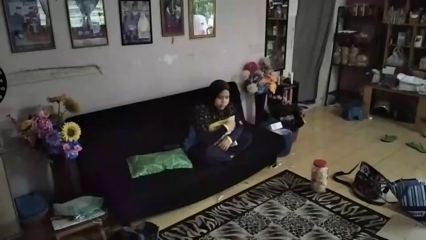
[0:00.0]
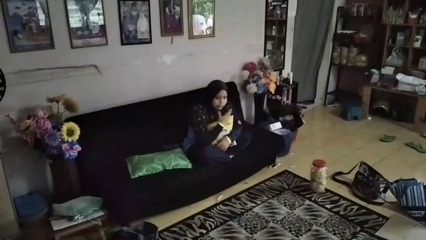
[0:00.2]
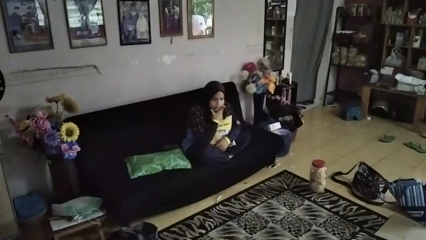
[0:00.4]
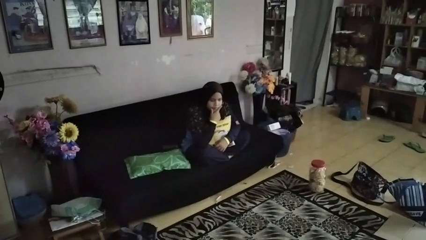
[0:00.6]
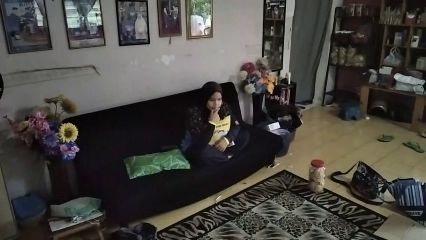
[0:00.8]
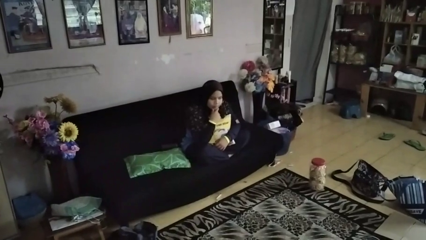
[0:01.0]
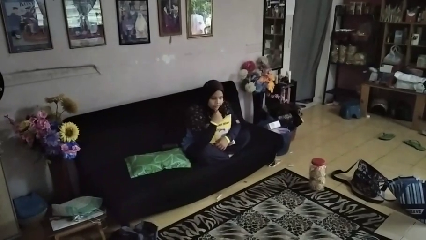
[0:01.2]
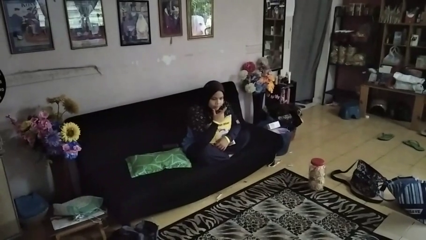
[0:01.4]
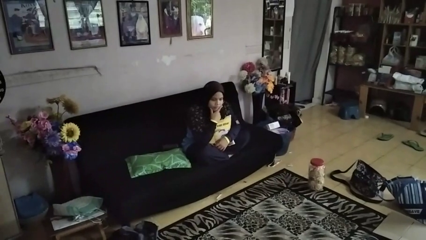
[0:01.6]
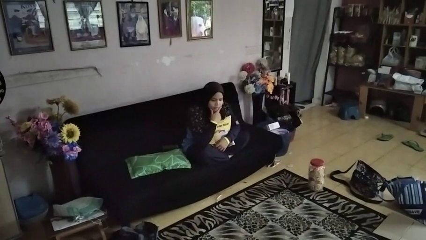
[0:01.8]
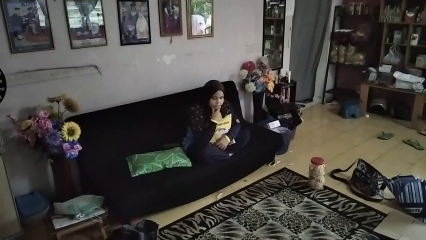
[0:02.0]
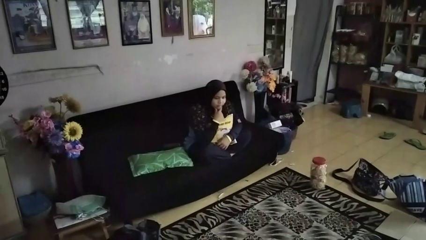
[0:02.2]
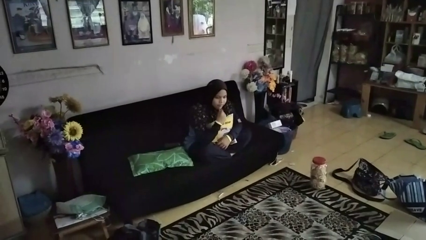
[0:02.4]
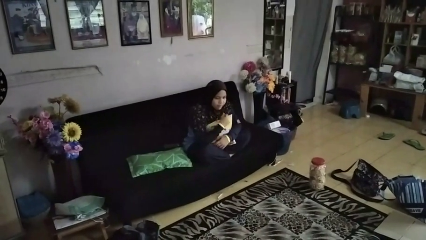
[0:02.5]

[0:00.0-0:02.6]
person strokes chin

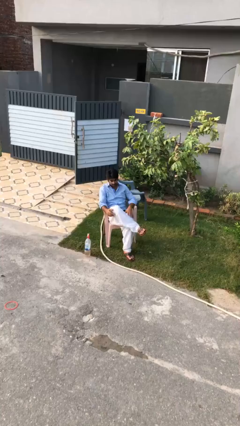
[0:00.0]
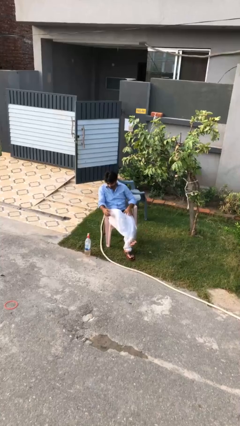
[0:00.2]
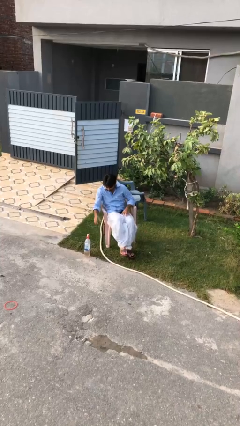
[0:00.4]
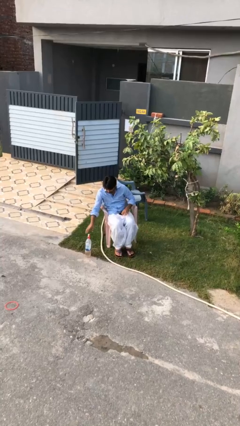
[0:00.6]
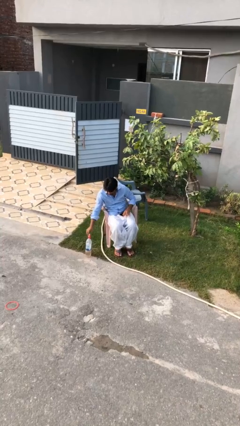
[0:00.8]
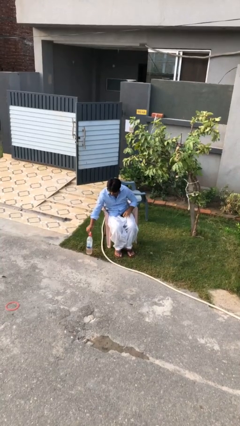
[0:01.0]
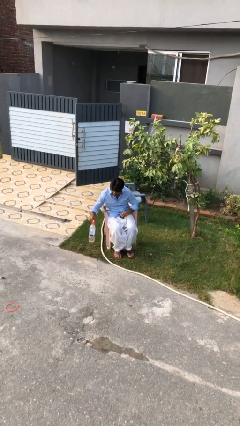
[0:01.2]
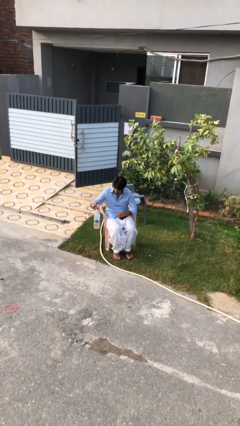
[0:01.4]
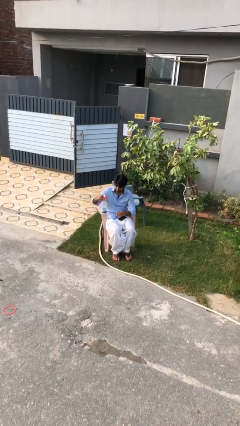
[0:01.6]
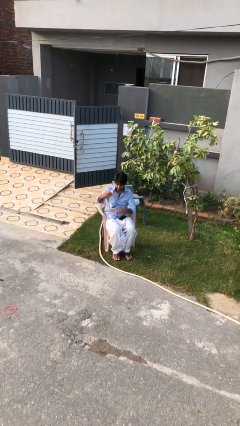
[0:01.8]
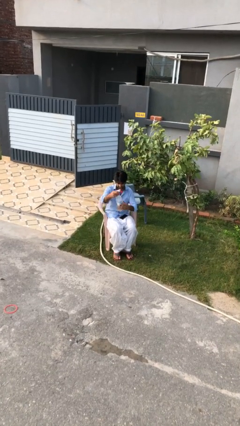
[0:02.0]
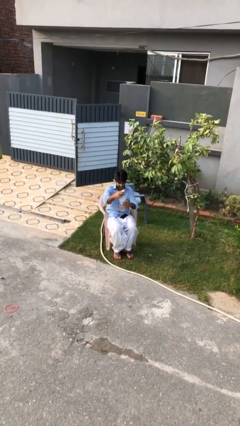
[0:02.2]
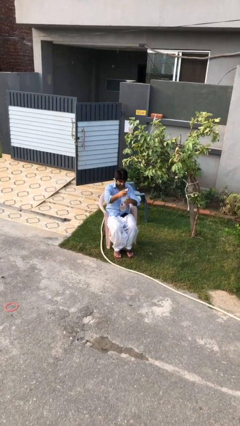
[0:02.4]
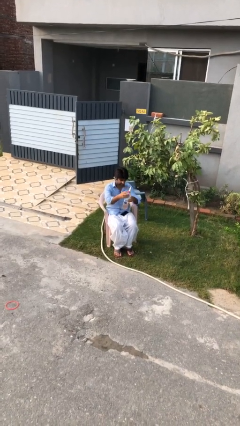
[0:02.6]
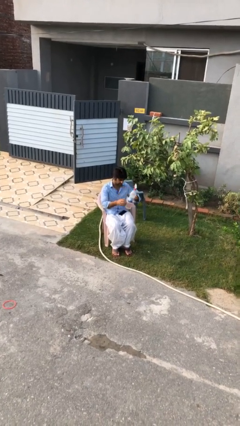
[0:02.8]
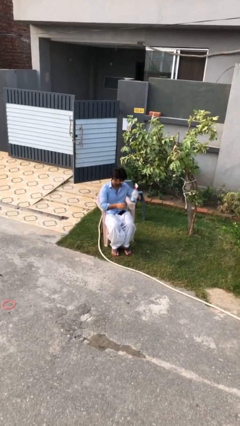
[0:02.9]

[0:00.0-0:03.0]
person picks up object from floor

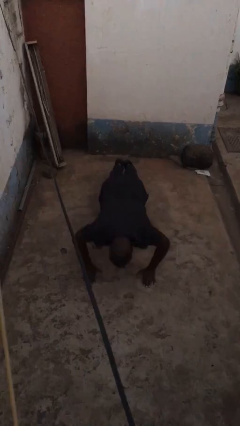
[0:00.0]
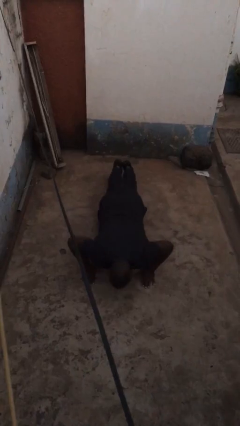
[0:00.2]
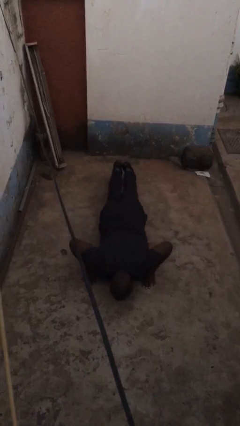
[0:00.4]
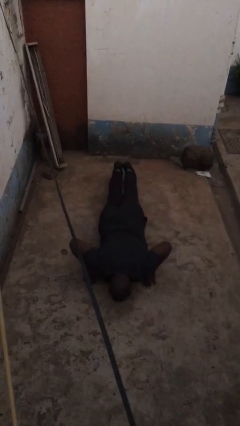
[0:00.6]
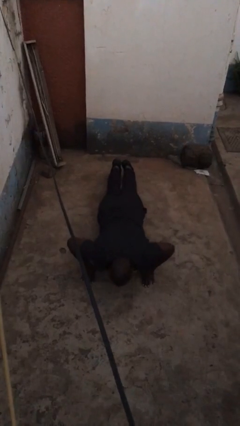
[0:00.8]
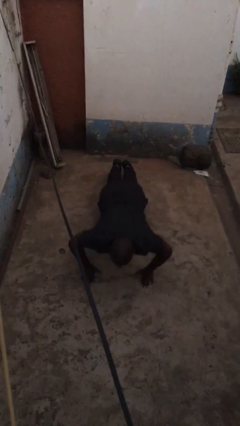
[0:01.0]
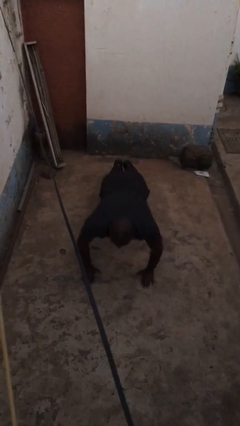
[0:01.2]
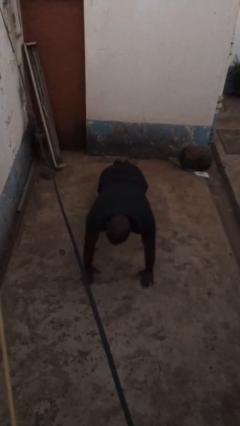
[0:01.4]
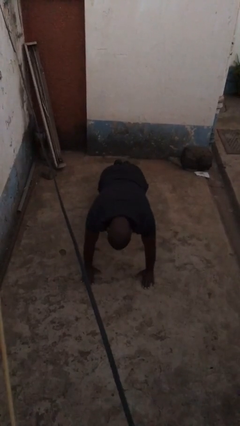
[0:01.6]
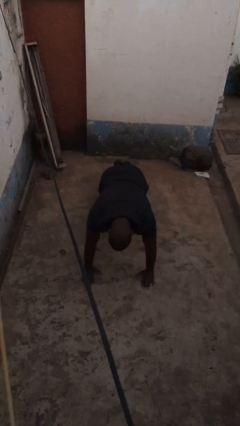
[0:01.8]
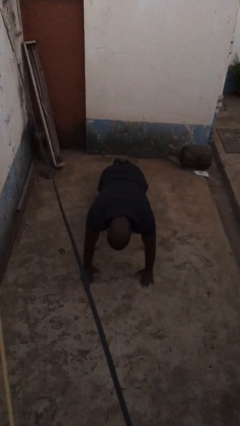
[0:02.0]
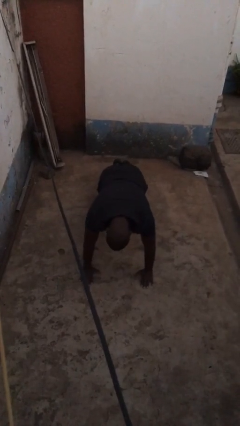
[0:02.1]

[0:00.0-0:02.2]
person exercises with pushup

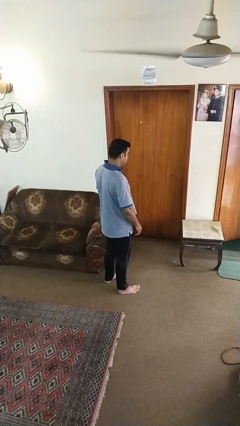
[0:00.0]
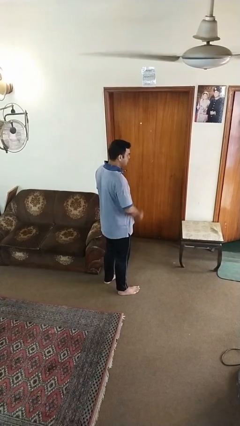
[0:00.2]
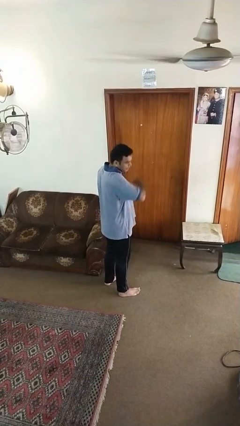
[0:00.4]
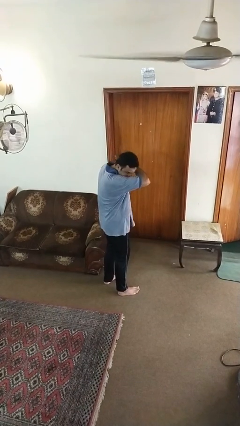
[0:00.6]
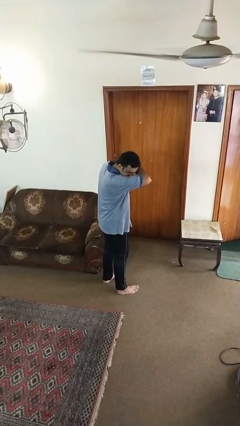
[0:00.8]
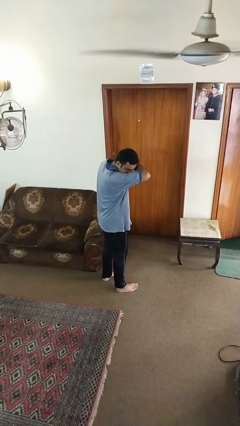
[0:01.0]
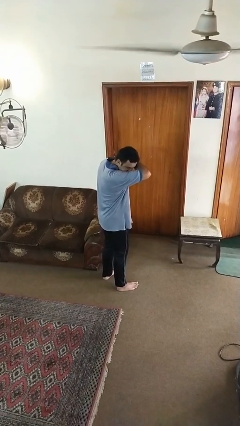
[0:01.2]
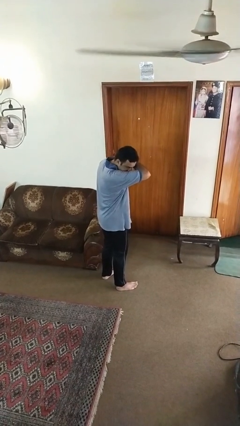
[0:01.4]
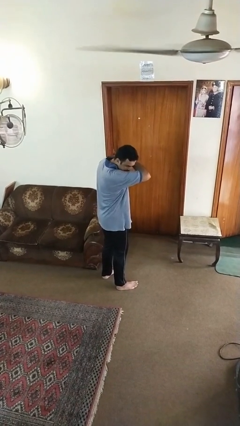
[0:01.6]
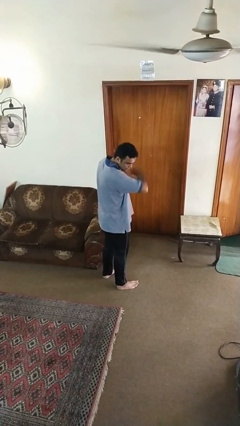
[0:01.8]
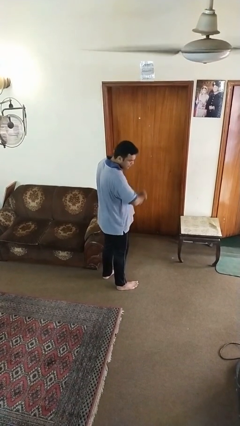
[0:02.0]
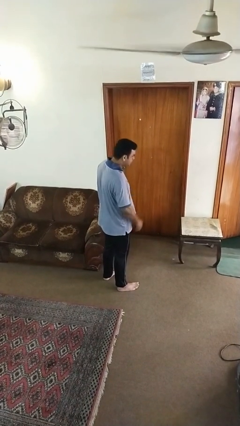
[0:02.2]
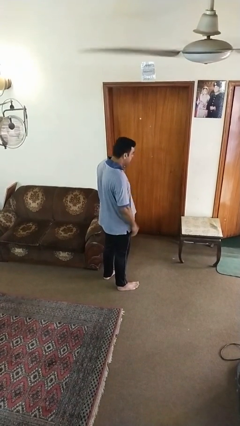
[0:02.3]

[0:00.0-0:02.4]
person sneezes into arm

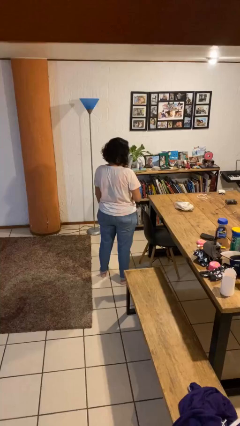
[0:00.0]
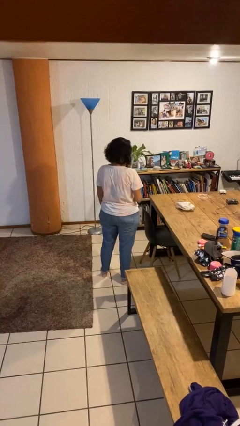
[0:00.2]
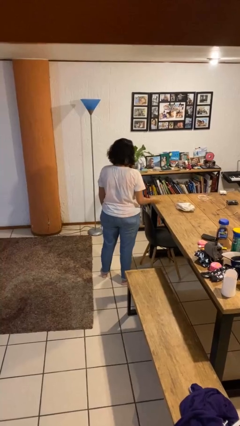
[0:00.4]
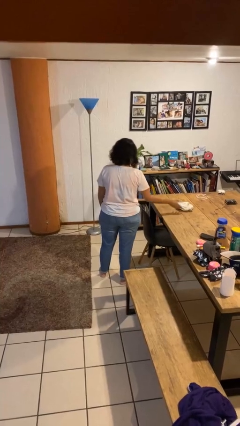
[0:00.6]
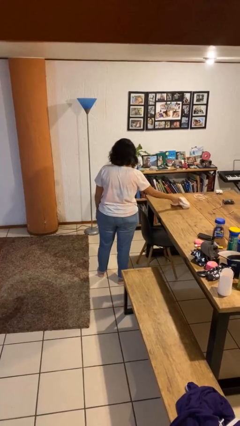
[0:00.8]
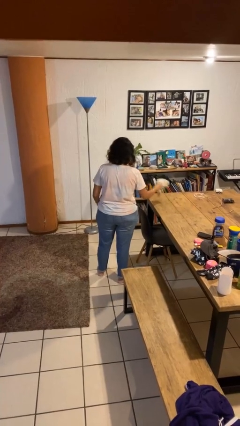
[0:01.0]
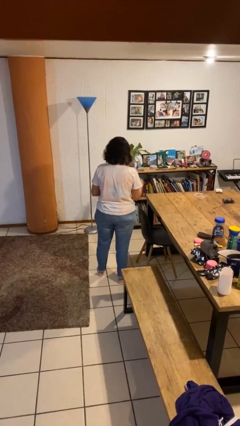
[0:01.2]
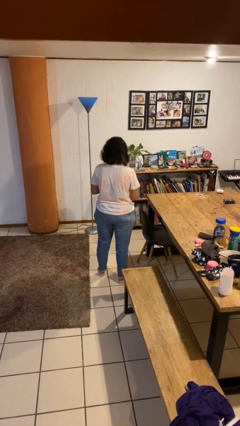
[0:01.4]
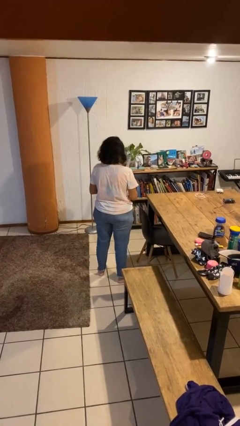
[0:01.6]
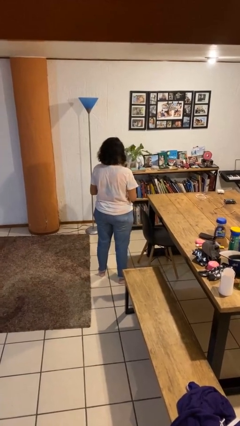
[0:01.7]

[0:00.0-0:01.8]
person picks up object from table

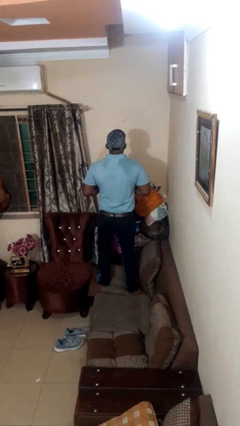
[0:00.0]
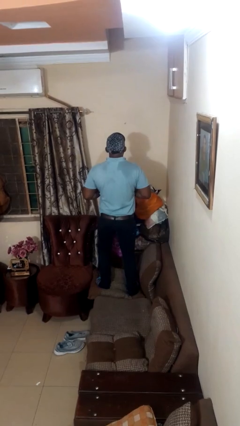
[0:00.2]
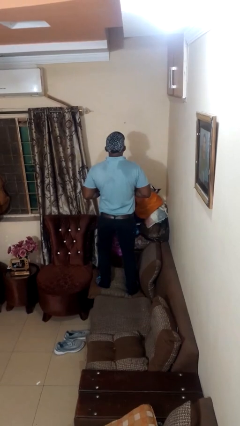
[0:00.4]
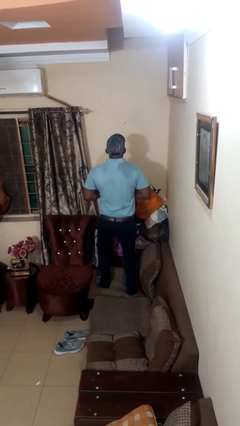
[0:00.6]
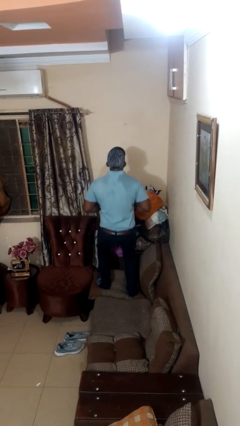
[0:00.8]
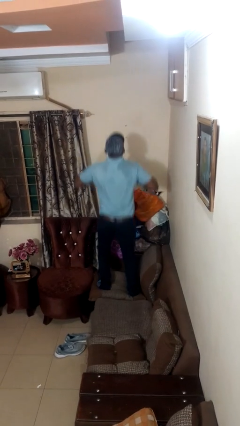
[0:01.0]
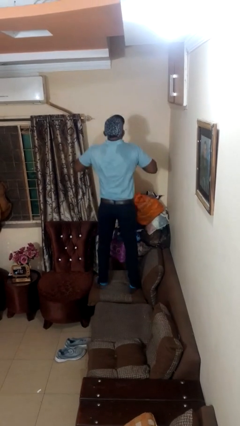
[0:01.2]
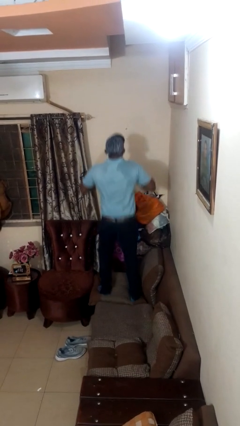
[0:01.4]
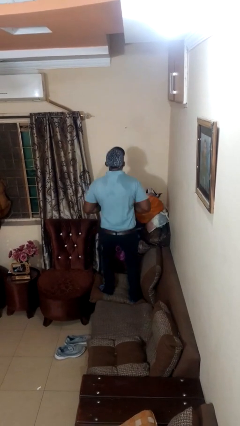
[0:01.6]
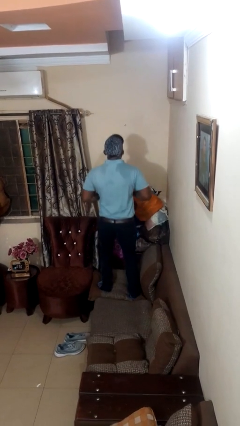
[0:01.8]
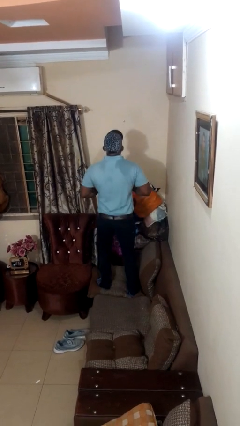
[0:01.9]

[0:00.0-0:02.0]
person jumps on couch

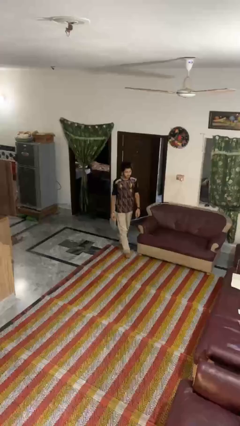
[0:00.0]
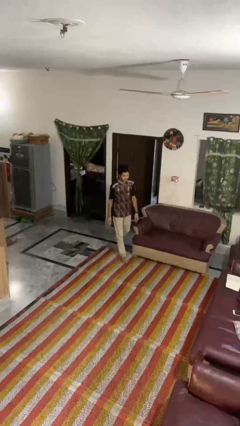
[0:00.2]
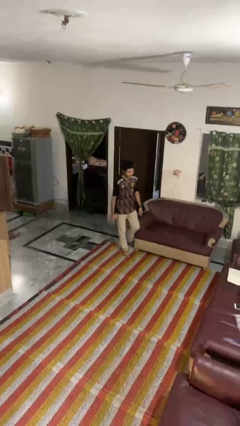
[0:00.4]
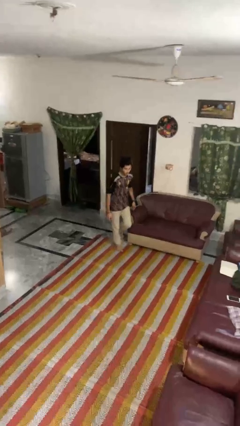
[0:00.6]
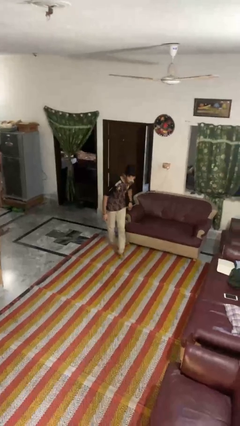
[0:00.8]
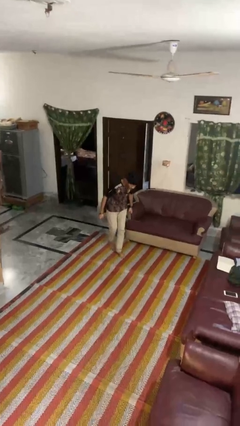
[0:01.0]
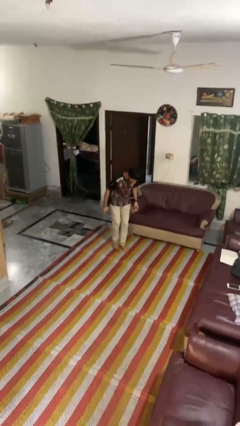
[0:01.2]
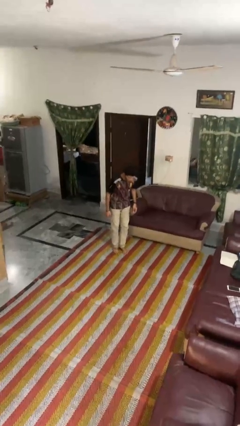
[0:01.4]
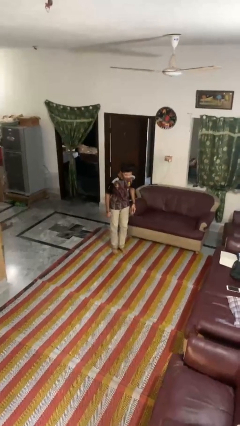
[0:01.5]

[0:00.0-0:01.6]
person stubs toe

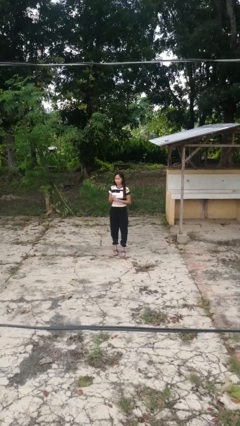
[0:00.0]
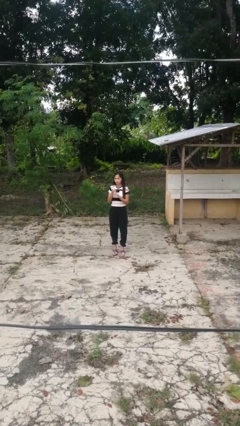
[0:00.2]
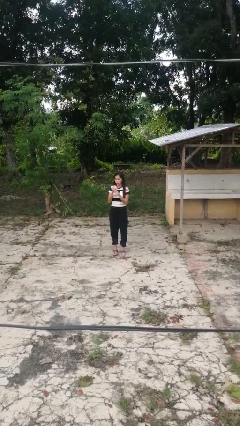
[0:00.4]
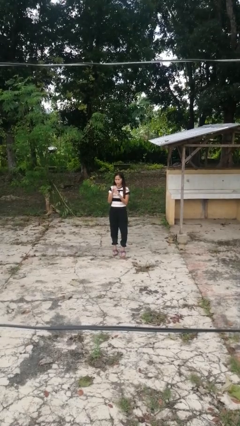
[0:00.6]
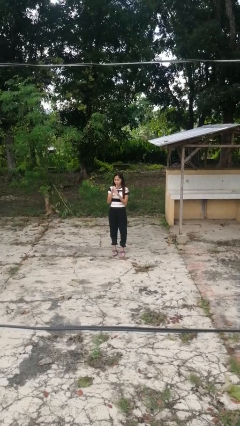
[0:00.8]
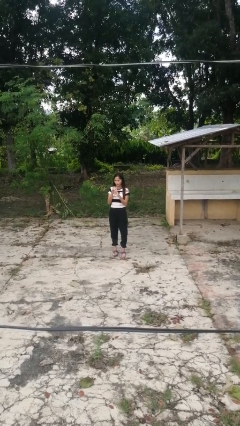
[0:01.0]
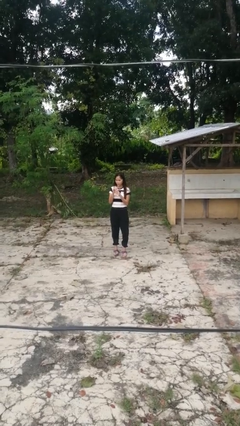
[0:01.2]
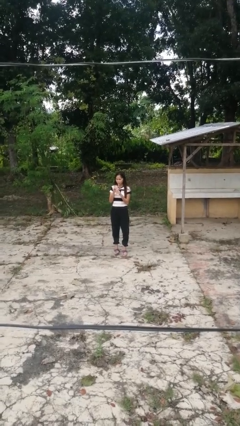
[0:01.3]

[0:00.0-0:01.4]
person drinks from straw
